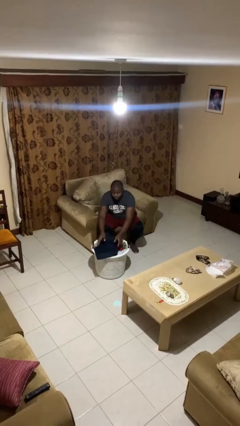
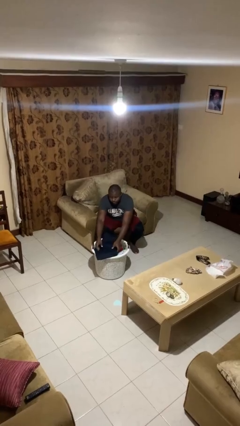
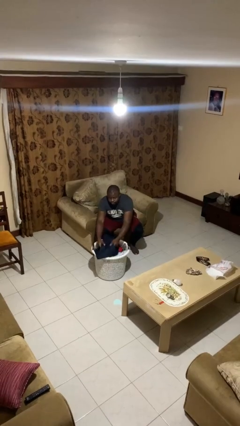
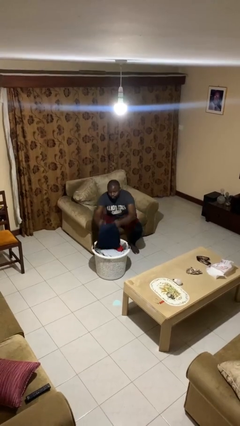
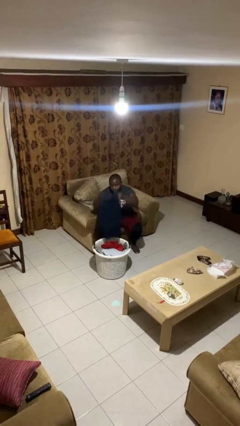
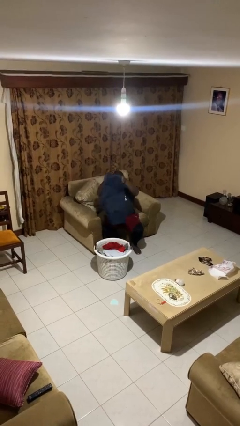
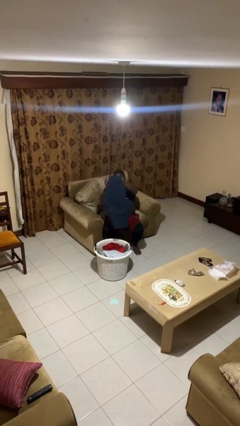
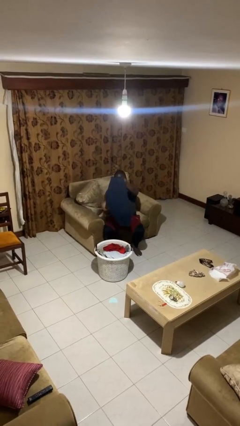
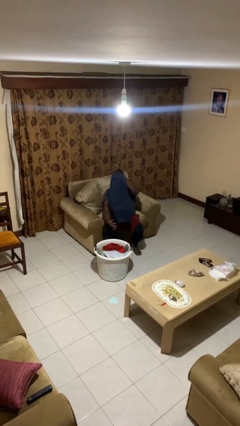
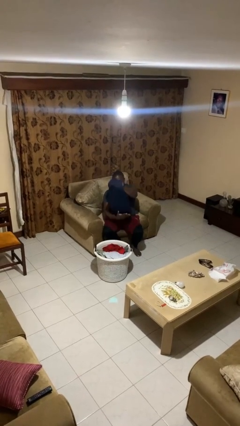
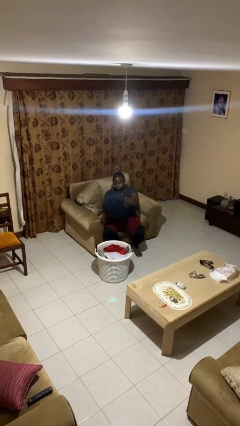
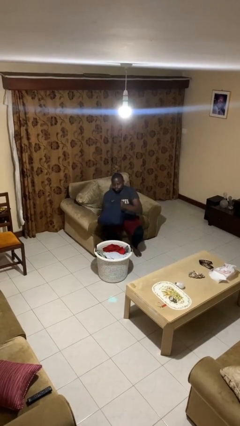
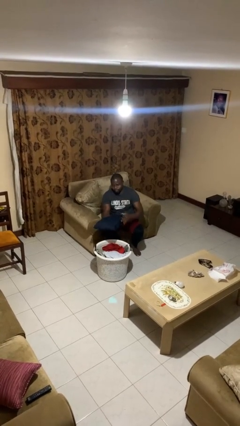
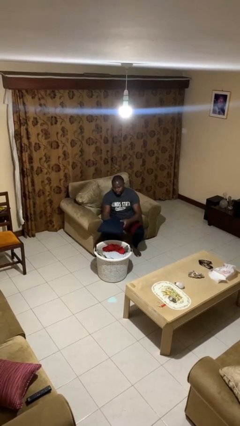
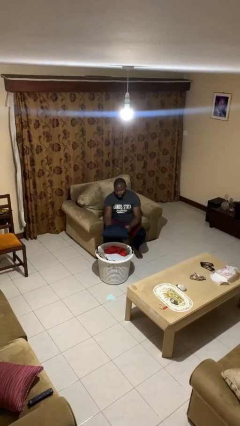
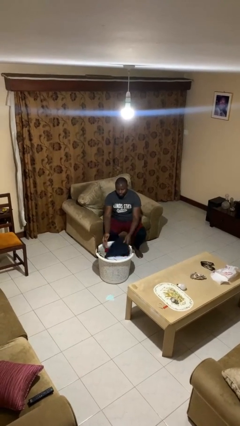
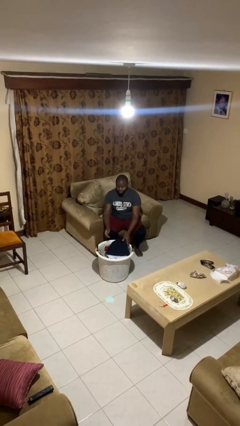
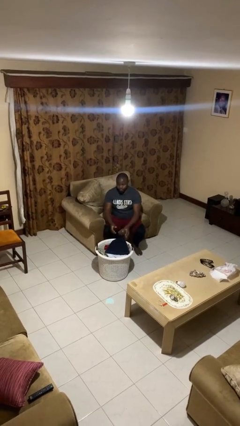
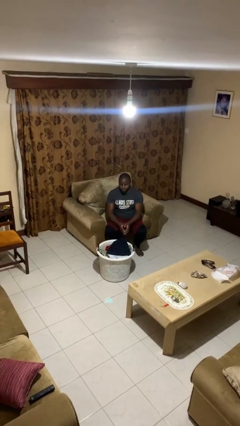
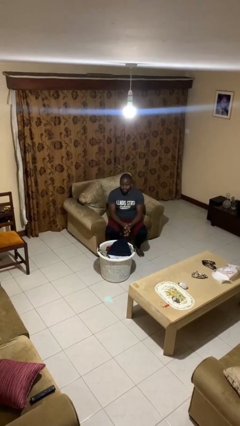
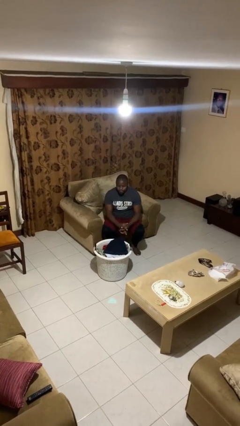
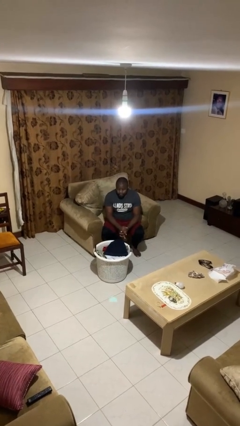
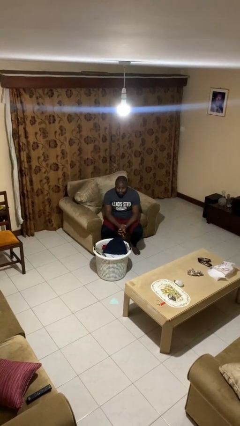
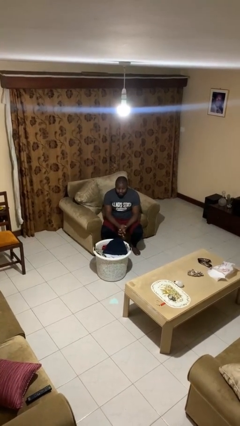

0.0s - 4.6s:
person folds pants

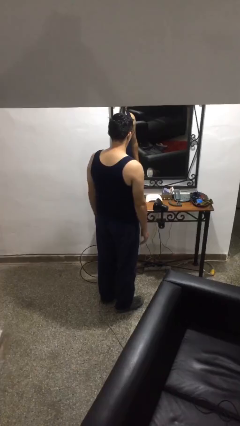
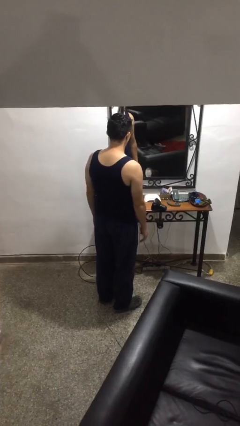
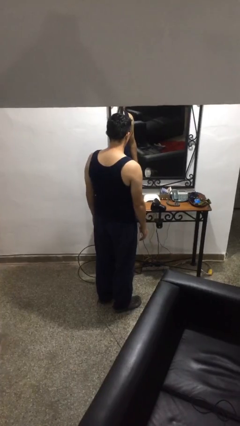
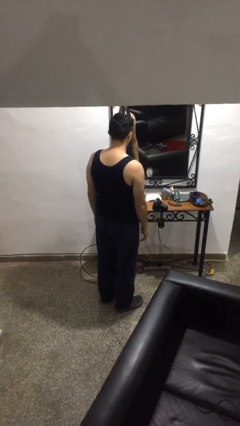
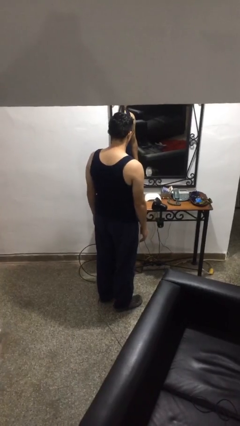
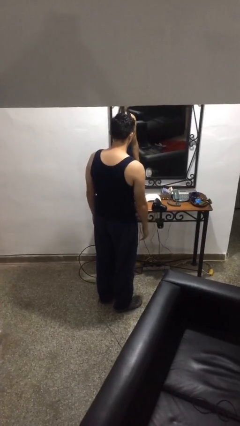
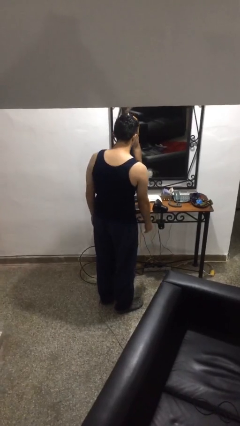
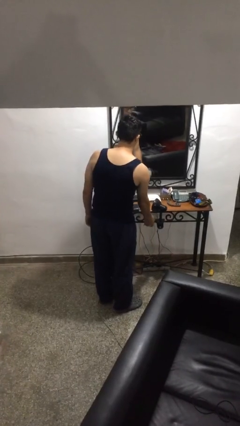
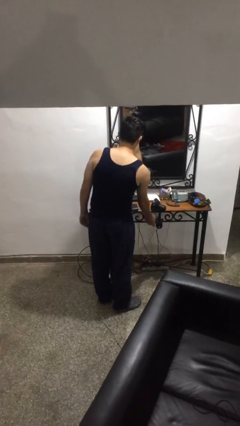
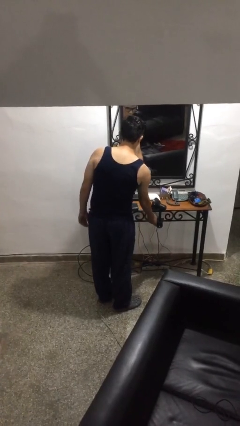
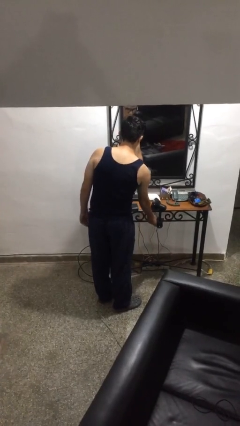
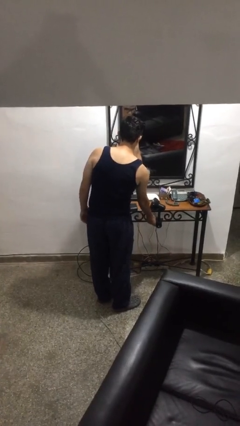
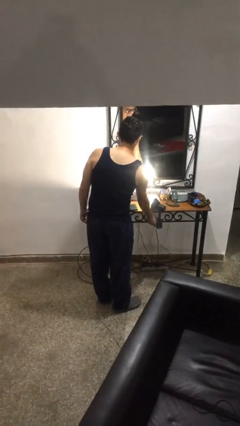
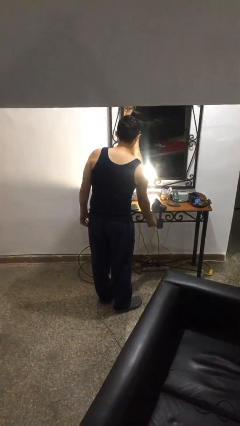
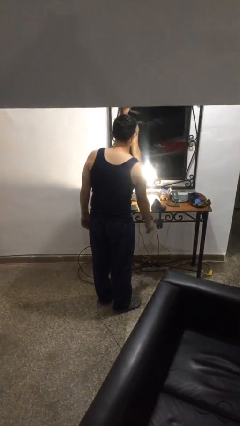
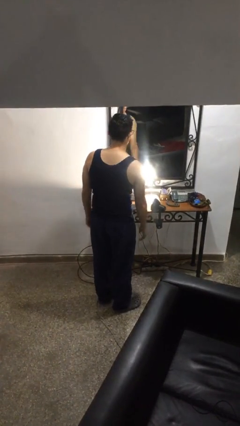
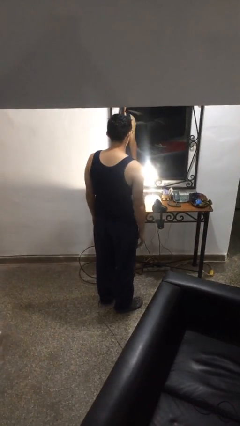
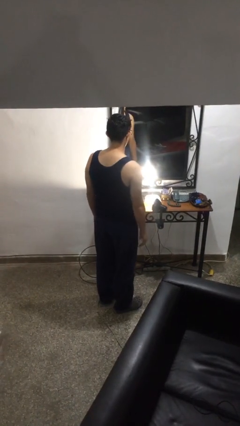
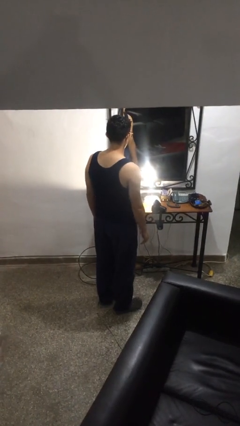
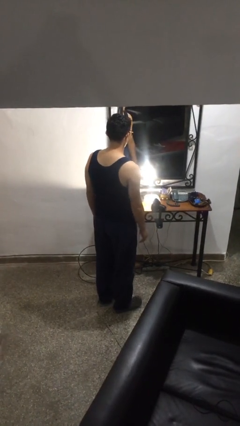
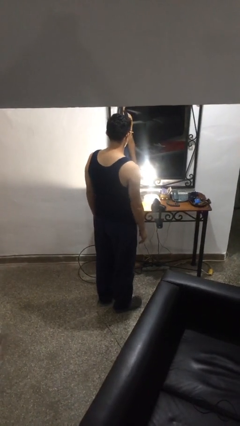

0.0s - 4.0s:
person turns on lamp

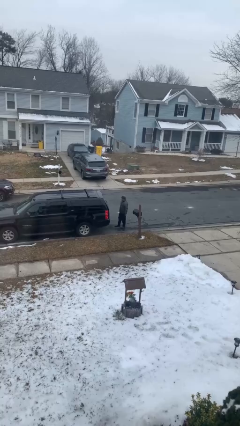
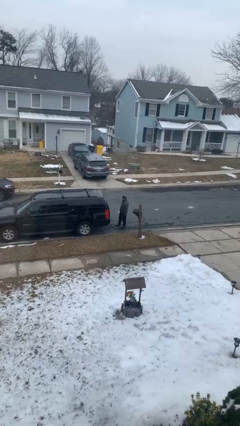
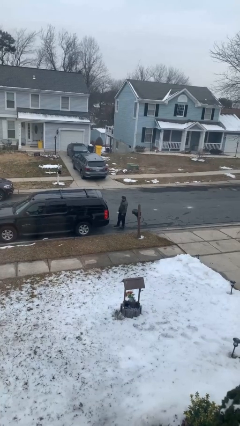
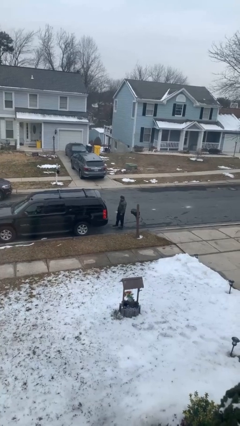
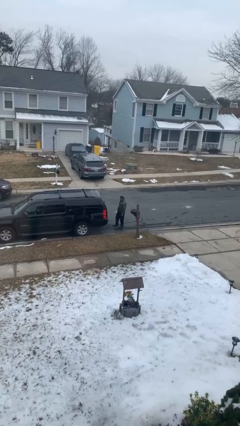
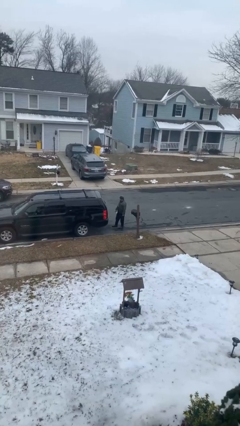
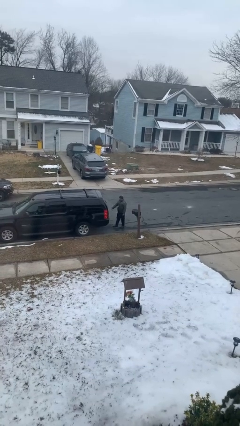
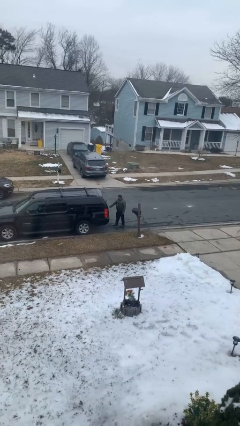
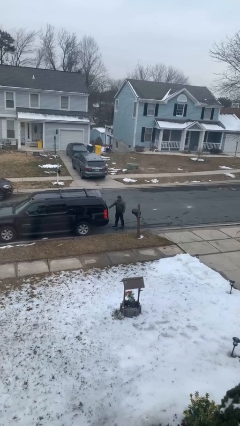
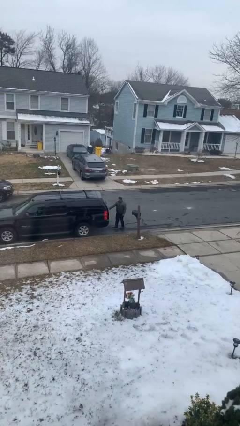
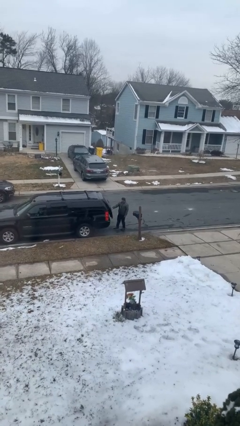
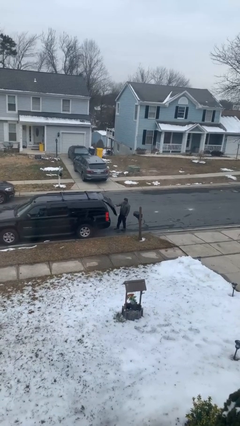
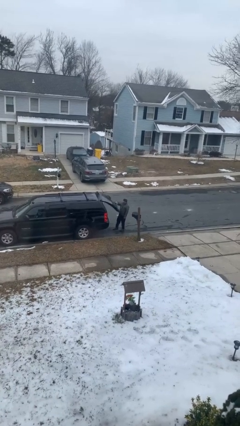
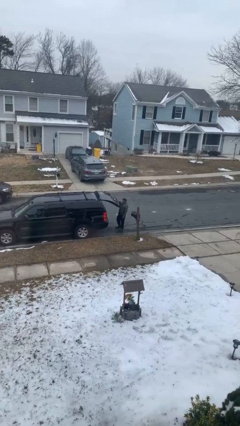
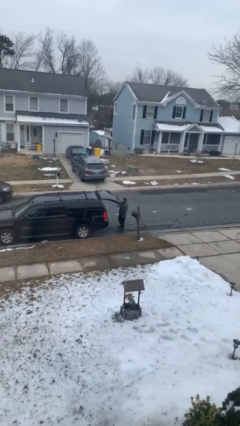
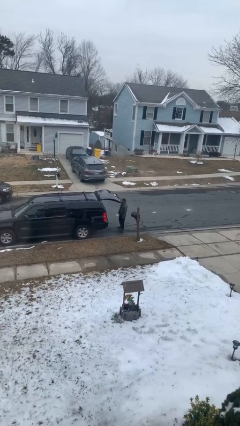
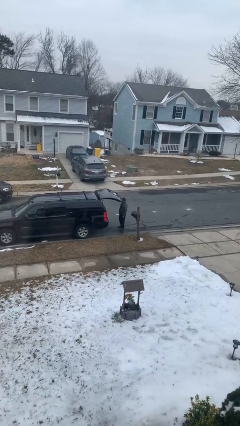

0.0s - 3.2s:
person opens car trunk

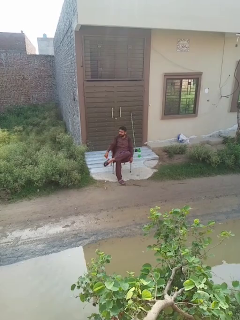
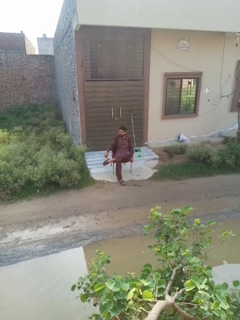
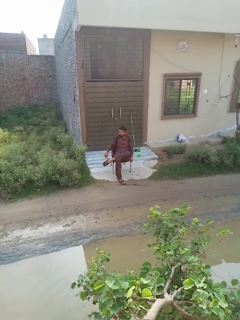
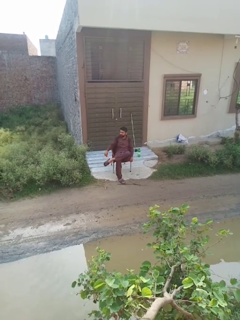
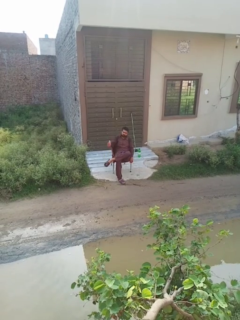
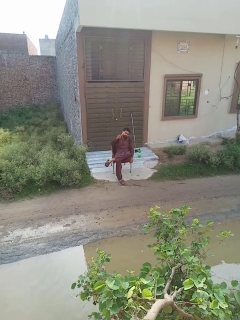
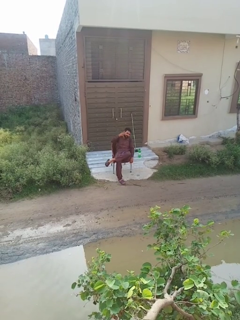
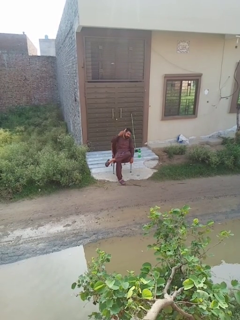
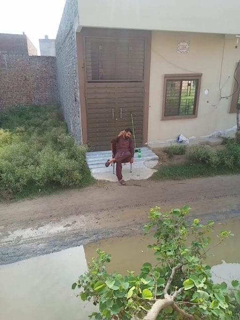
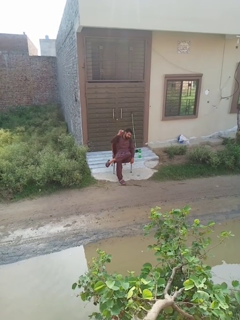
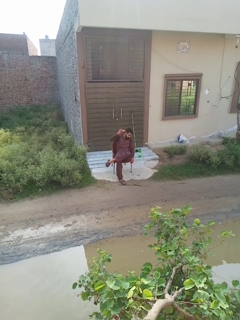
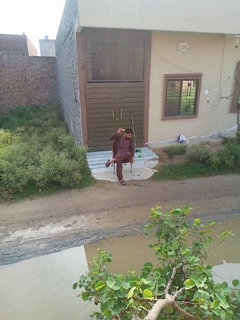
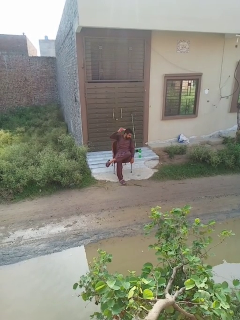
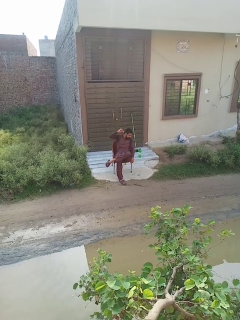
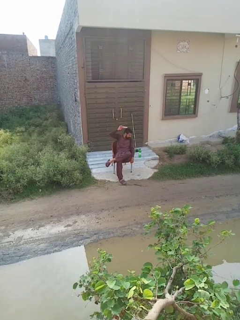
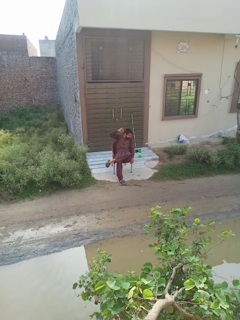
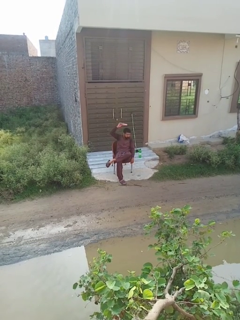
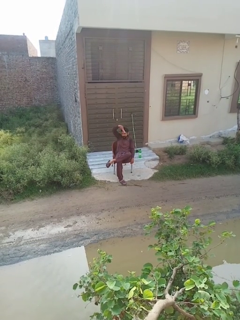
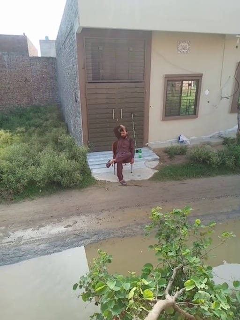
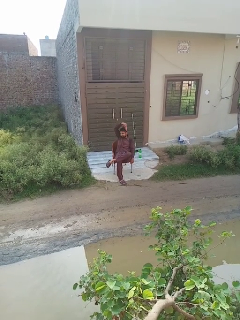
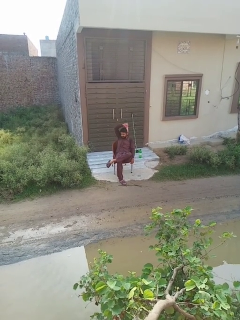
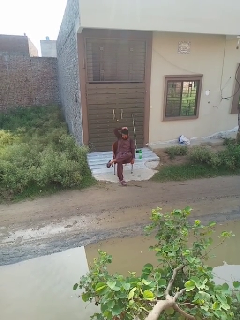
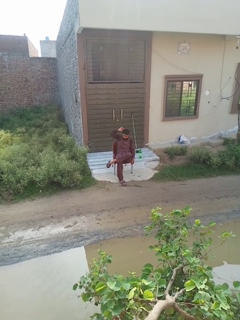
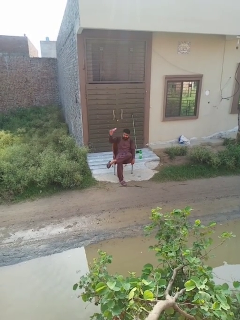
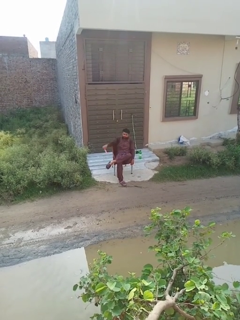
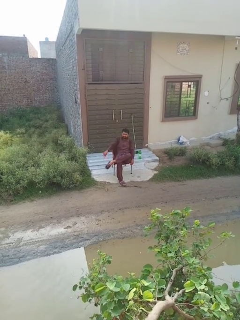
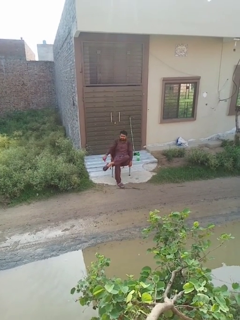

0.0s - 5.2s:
person brushes hair

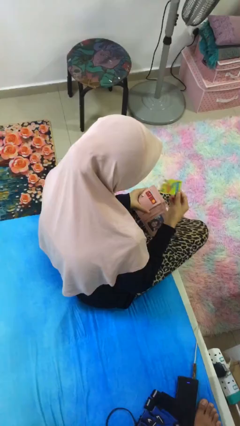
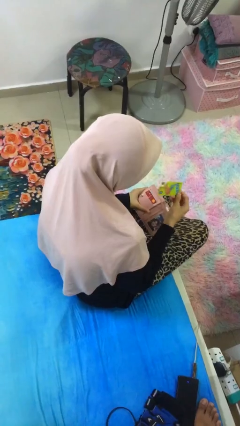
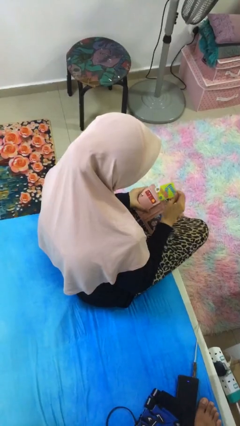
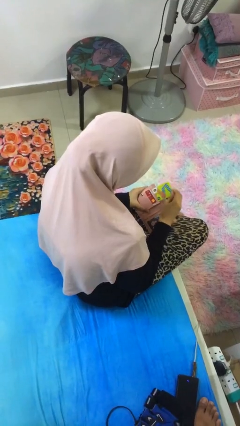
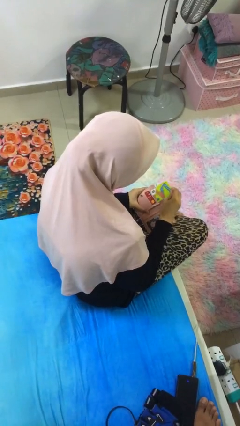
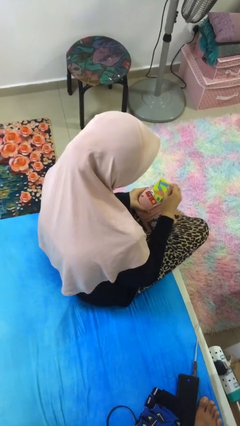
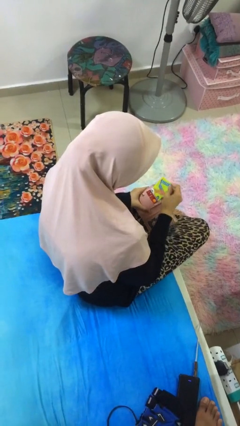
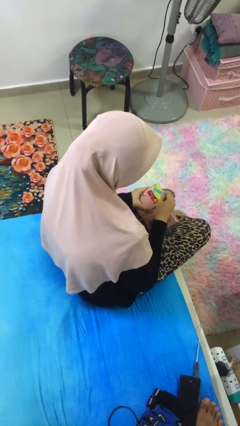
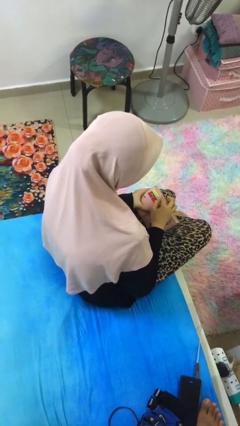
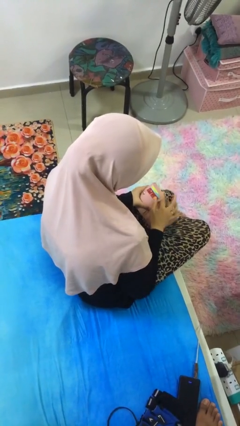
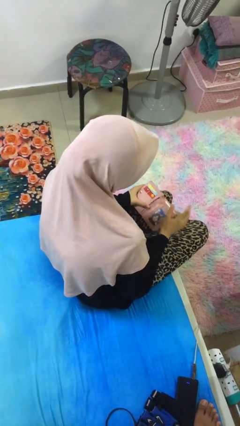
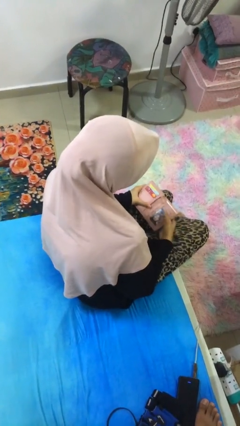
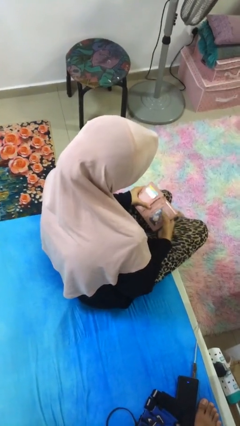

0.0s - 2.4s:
person puts object into purse
